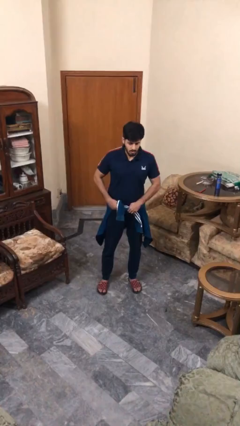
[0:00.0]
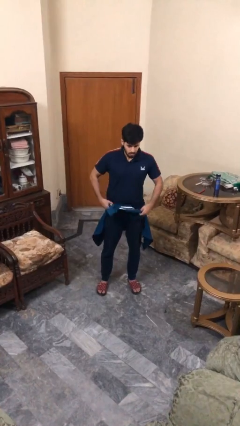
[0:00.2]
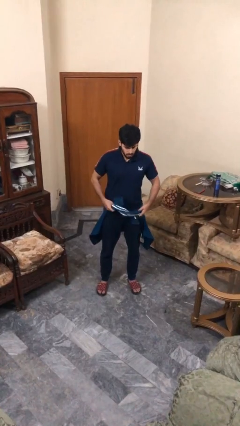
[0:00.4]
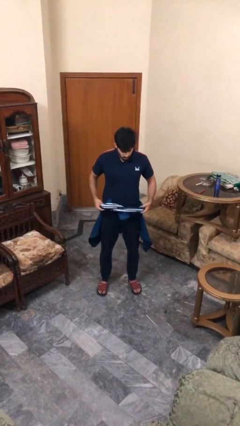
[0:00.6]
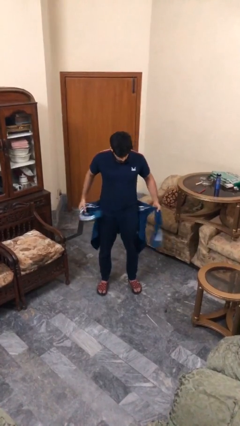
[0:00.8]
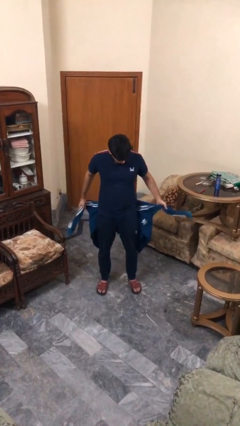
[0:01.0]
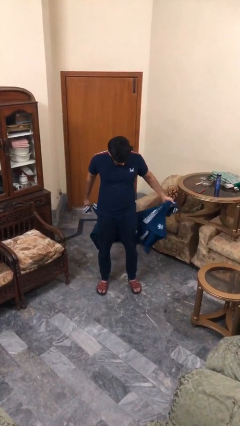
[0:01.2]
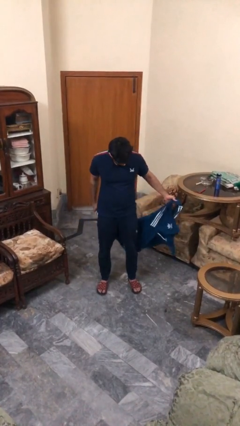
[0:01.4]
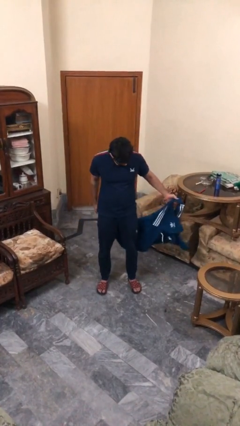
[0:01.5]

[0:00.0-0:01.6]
person unties jacket around waist

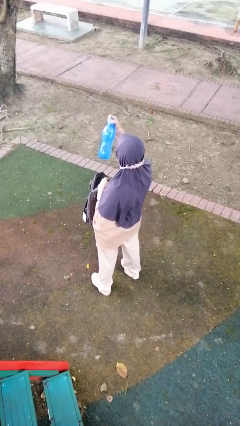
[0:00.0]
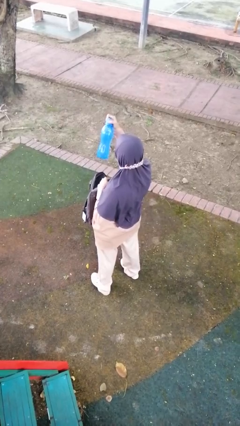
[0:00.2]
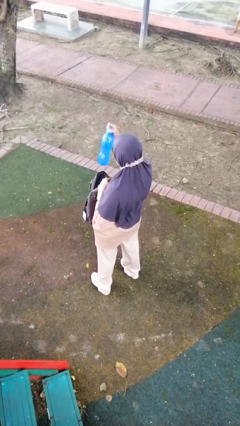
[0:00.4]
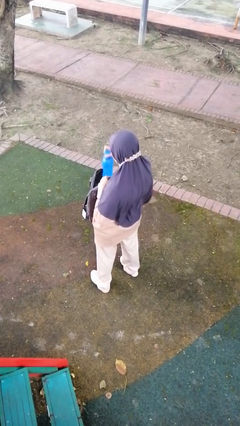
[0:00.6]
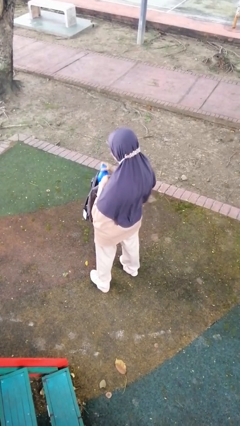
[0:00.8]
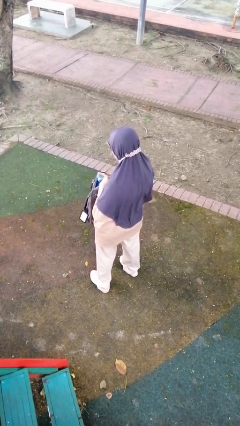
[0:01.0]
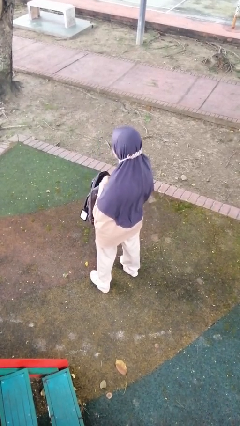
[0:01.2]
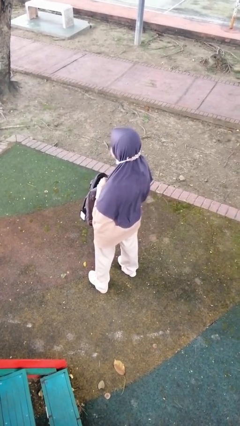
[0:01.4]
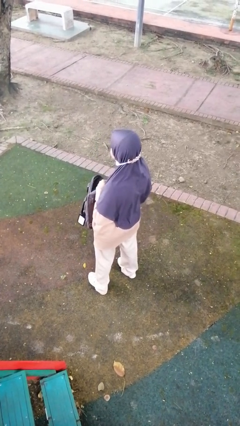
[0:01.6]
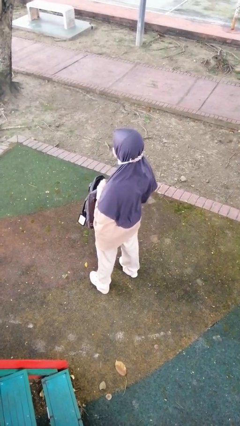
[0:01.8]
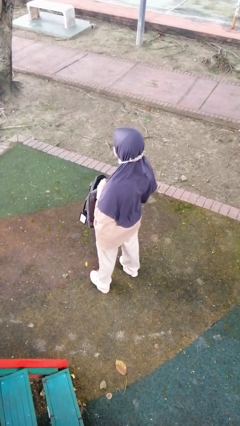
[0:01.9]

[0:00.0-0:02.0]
person puts object into backpack

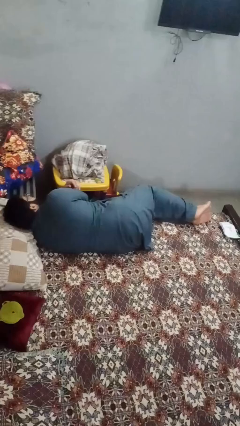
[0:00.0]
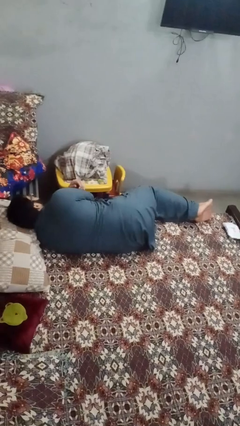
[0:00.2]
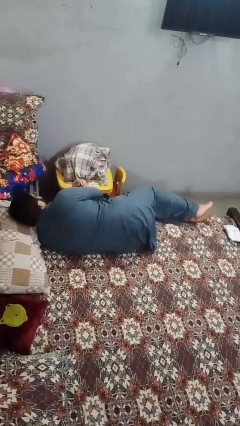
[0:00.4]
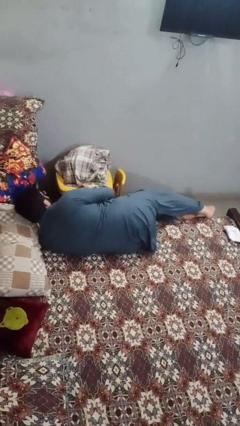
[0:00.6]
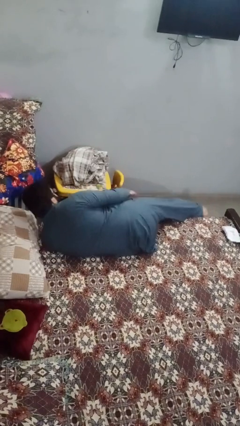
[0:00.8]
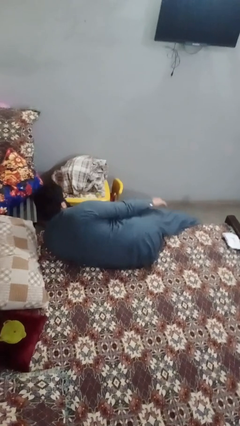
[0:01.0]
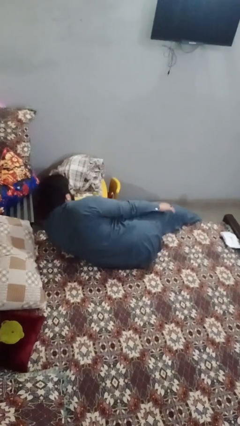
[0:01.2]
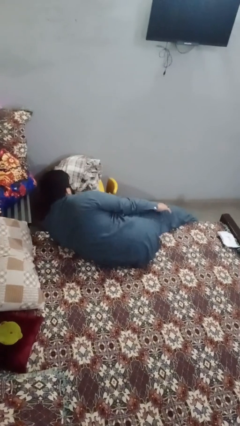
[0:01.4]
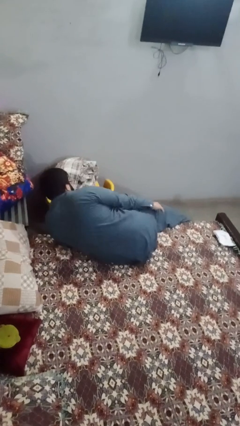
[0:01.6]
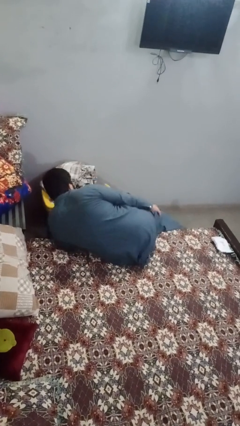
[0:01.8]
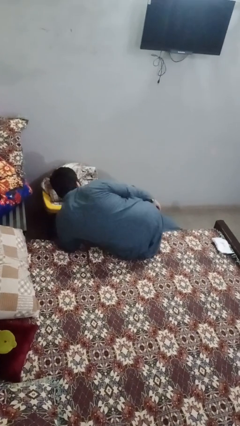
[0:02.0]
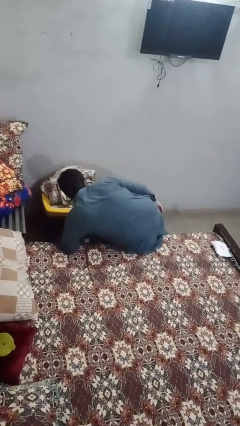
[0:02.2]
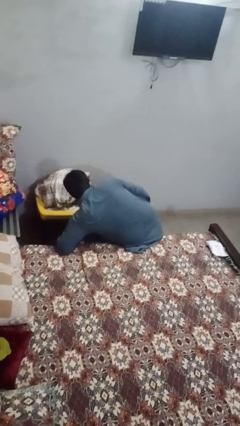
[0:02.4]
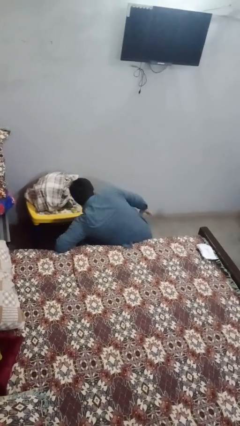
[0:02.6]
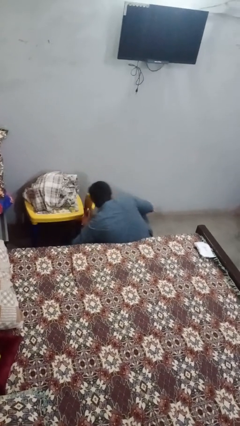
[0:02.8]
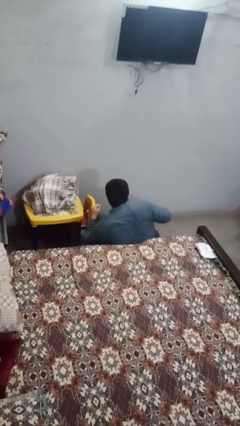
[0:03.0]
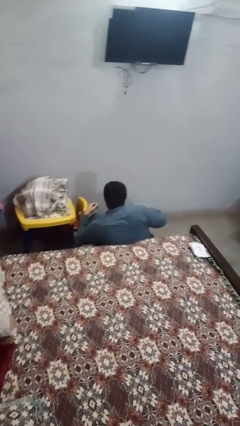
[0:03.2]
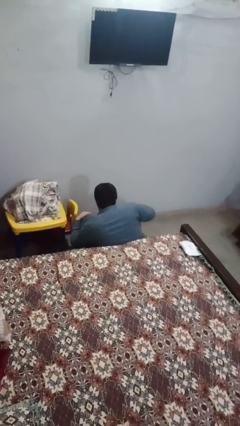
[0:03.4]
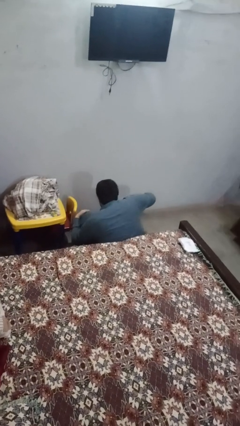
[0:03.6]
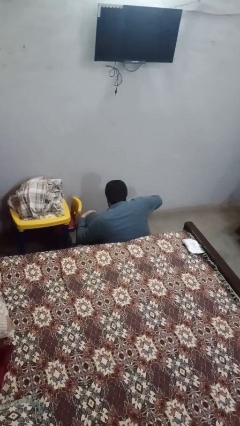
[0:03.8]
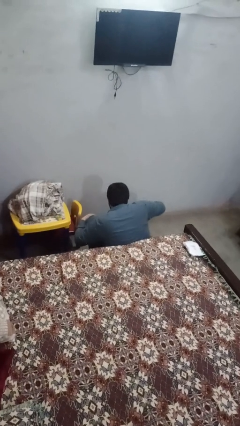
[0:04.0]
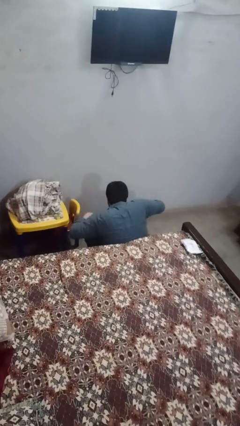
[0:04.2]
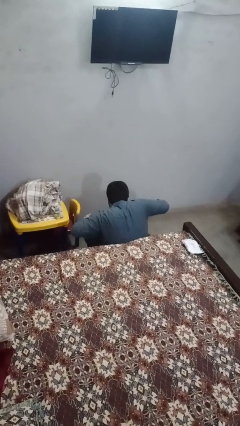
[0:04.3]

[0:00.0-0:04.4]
person falls from bed

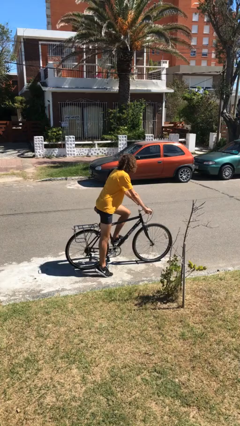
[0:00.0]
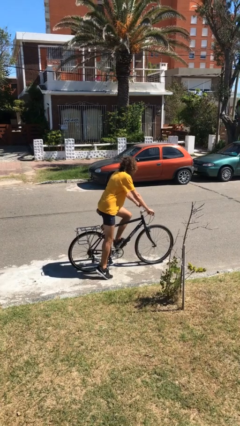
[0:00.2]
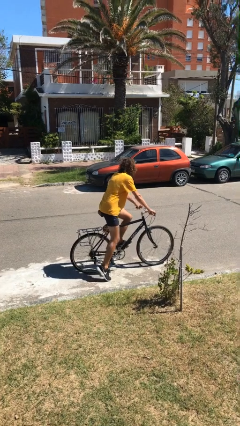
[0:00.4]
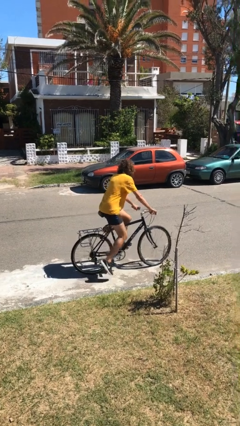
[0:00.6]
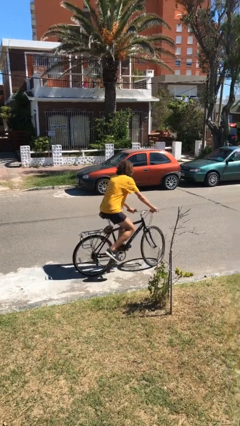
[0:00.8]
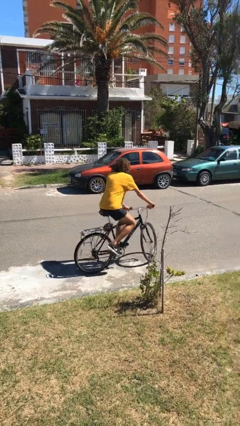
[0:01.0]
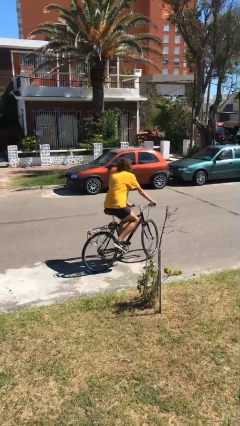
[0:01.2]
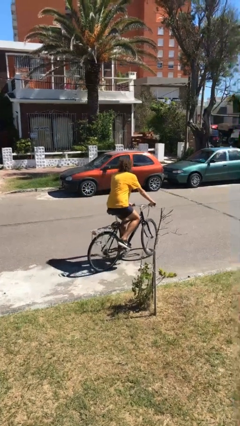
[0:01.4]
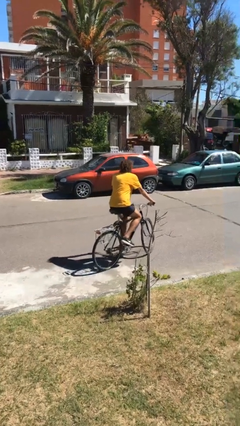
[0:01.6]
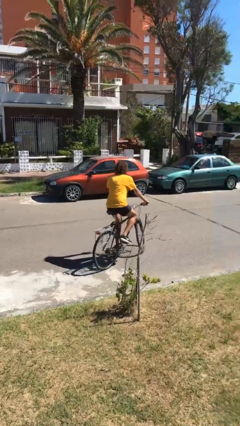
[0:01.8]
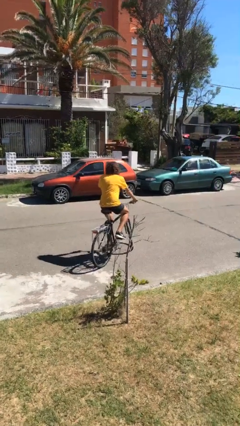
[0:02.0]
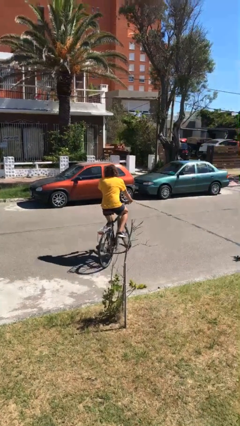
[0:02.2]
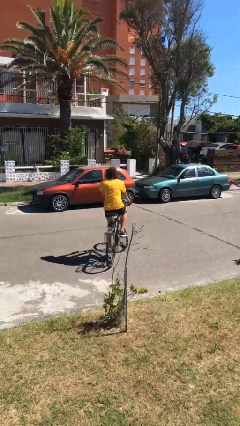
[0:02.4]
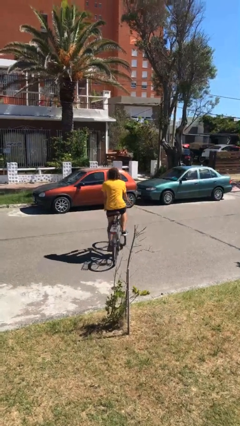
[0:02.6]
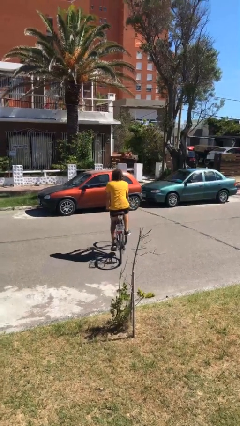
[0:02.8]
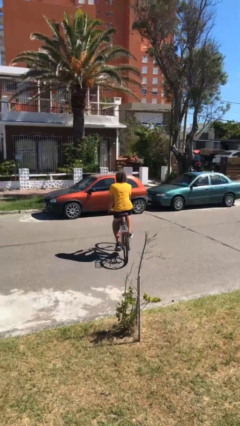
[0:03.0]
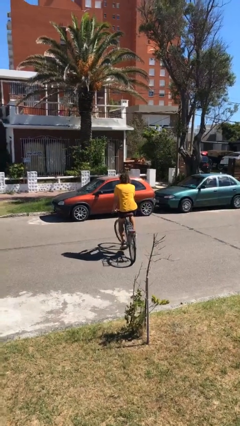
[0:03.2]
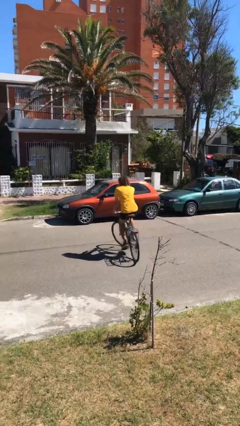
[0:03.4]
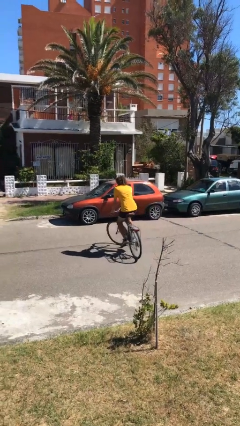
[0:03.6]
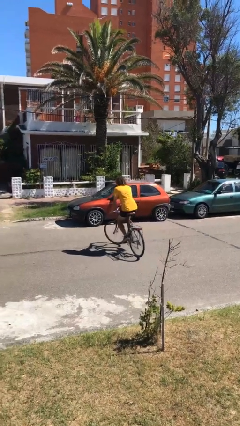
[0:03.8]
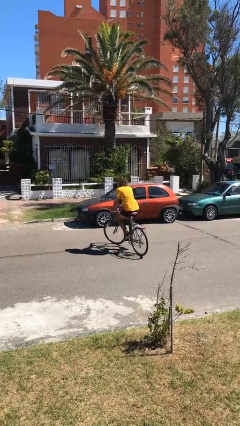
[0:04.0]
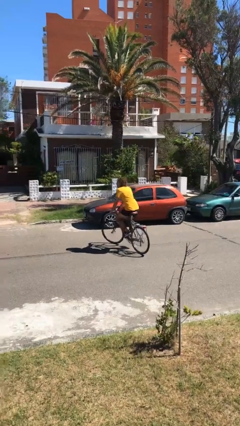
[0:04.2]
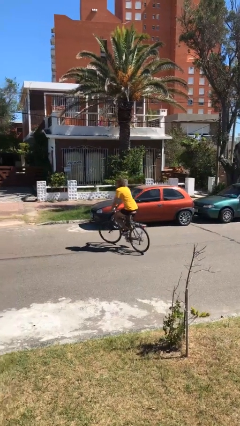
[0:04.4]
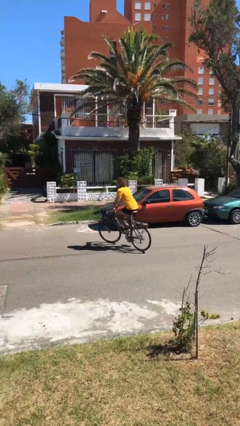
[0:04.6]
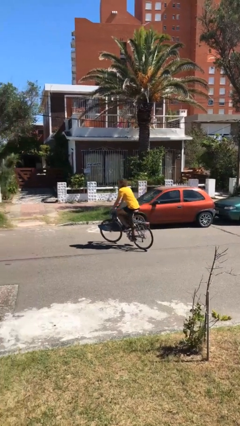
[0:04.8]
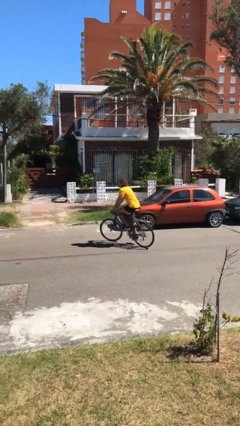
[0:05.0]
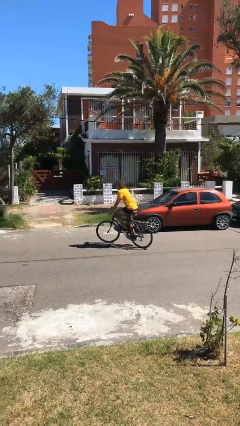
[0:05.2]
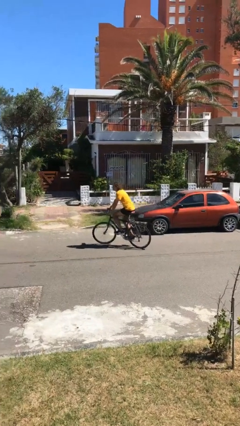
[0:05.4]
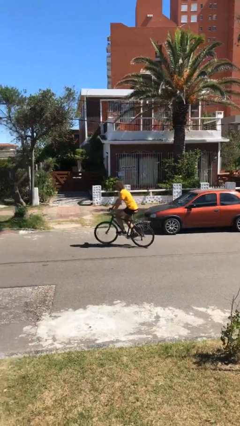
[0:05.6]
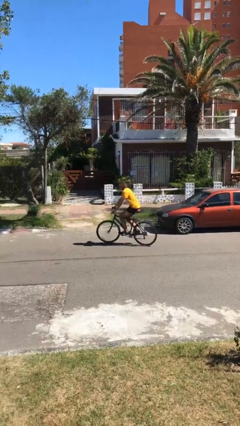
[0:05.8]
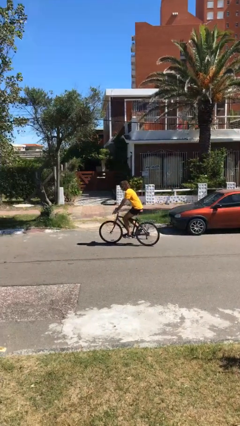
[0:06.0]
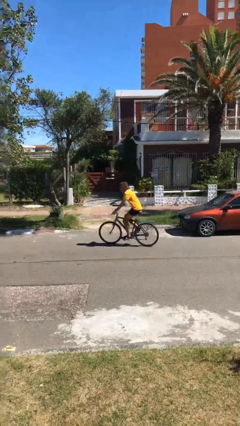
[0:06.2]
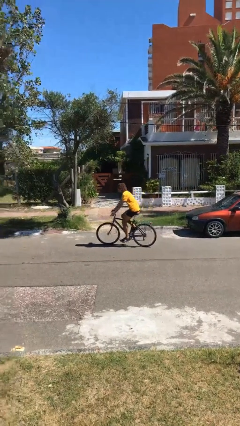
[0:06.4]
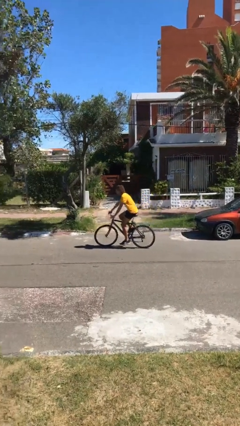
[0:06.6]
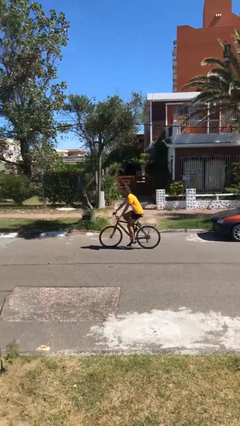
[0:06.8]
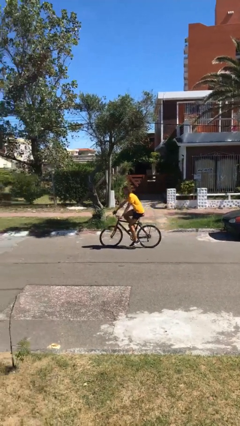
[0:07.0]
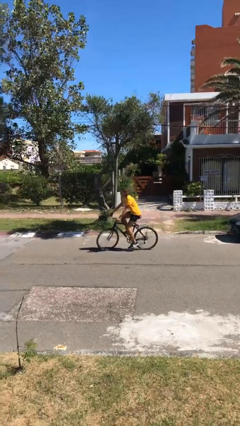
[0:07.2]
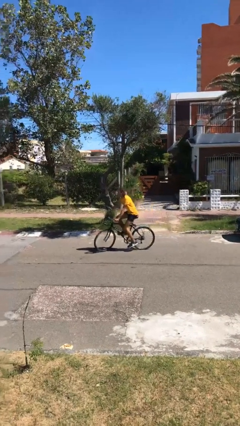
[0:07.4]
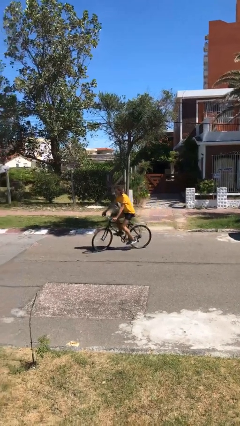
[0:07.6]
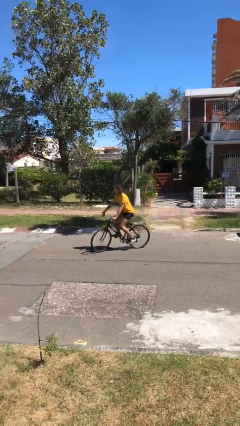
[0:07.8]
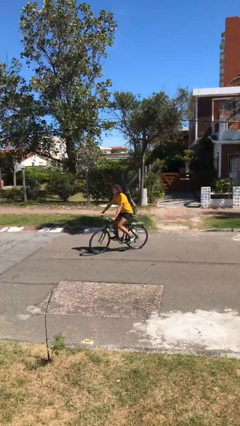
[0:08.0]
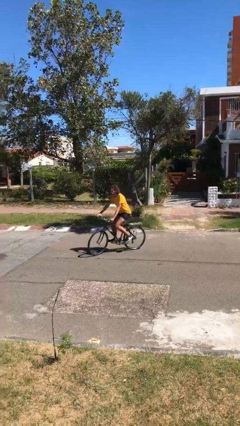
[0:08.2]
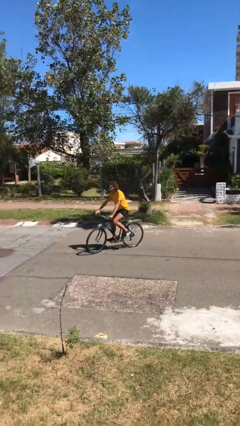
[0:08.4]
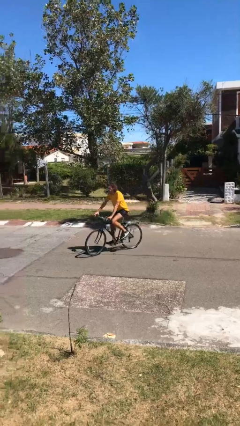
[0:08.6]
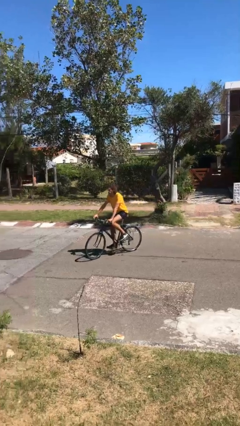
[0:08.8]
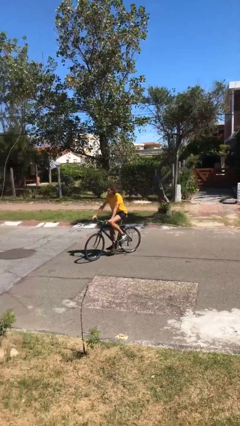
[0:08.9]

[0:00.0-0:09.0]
person rides bicycle

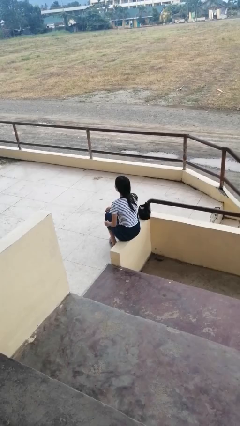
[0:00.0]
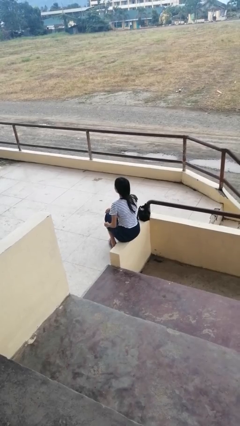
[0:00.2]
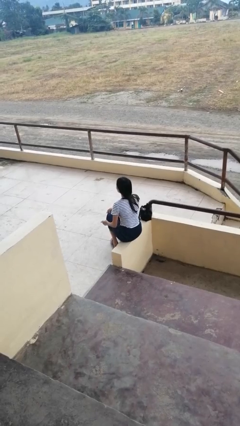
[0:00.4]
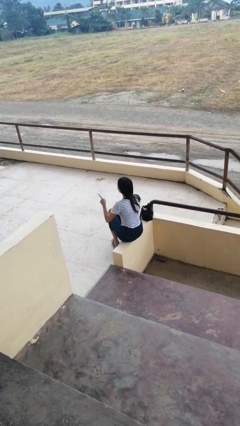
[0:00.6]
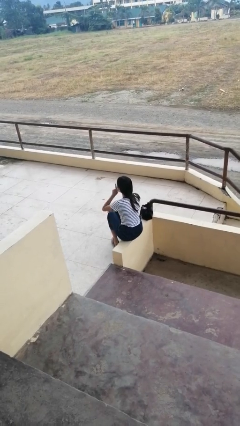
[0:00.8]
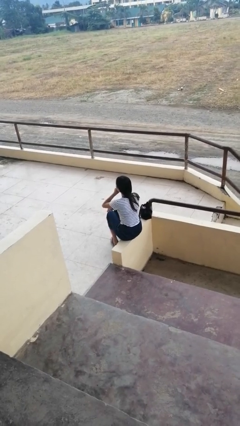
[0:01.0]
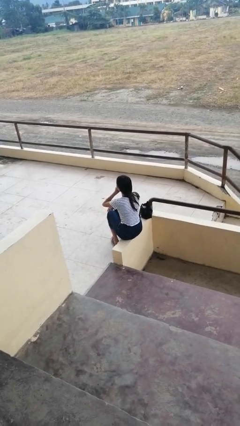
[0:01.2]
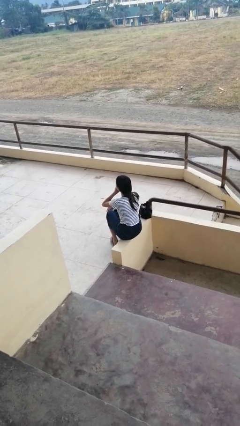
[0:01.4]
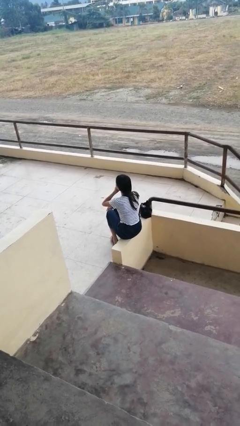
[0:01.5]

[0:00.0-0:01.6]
person gestures be quiet
